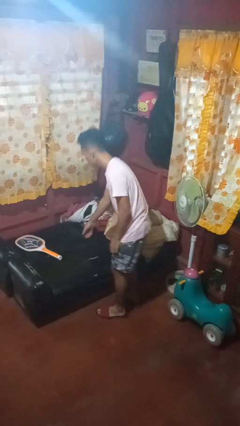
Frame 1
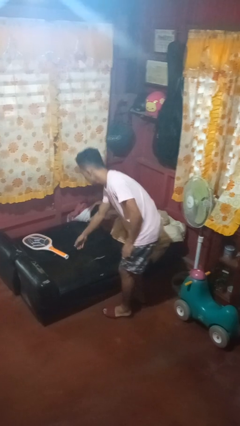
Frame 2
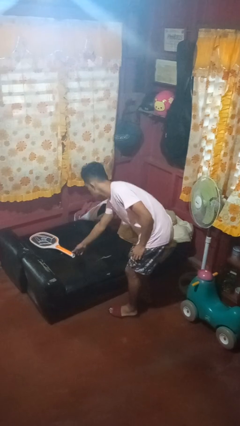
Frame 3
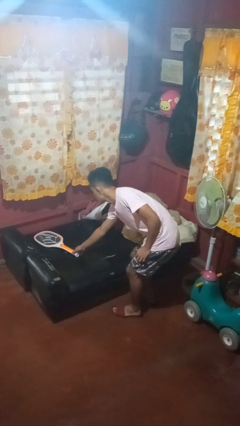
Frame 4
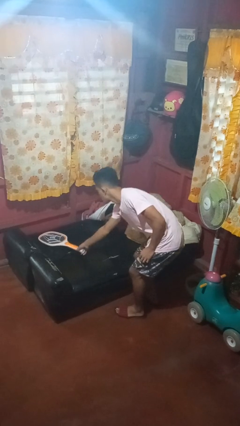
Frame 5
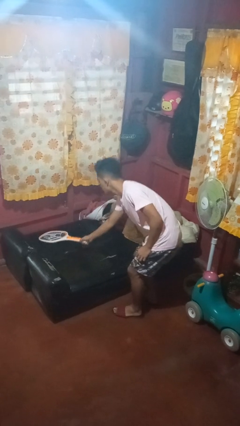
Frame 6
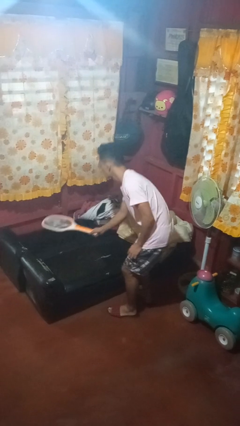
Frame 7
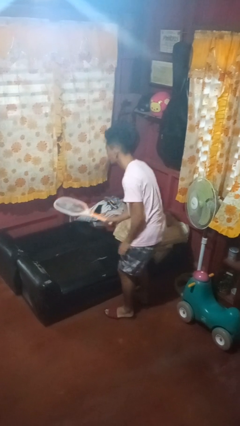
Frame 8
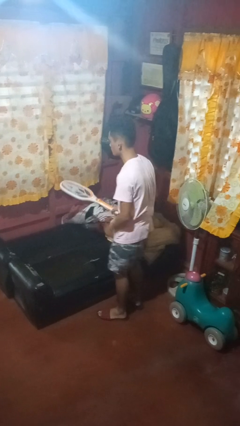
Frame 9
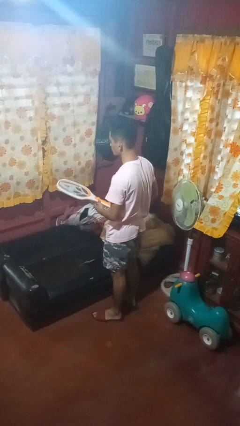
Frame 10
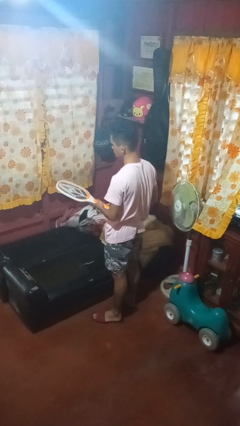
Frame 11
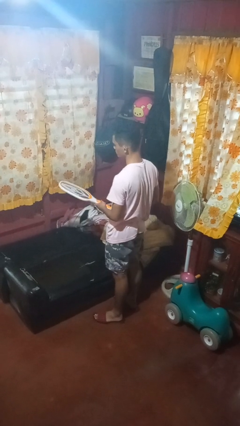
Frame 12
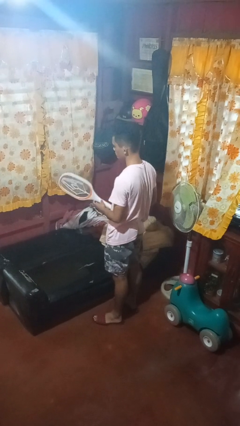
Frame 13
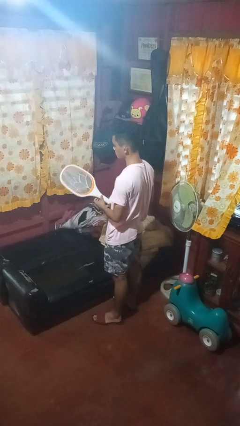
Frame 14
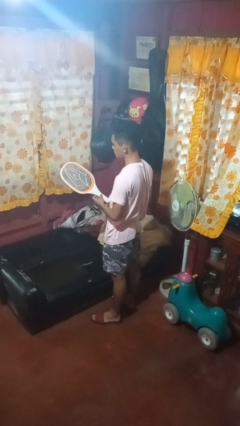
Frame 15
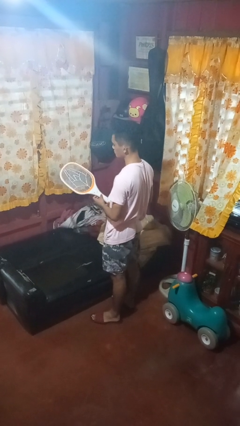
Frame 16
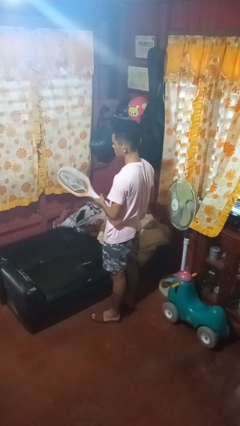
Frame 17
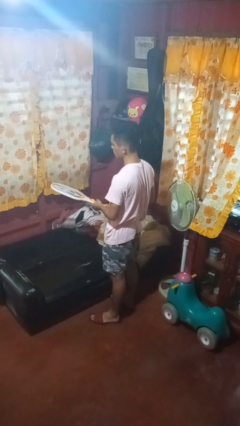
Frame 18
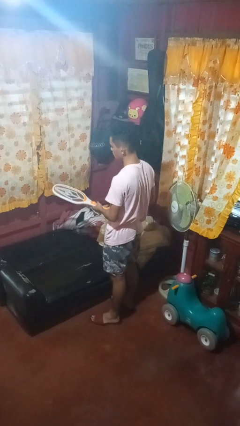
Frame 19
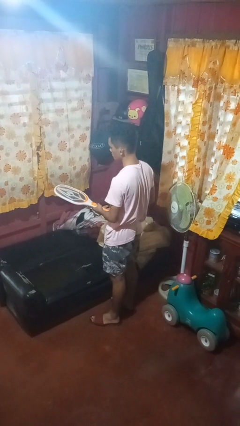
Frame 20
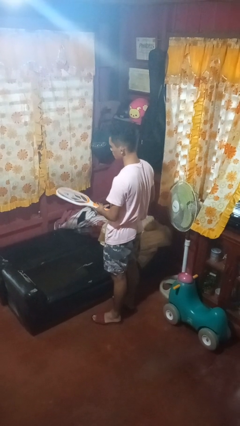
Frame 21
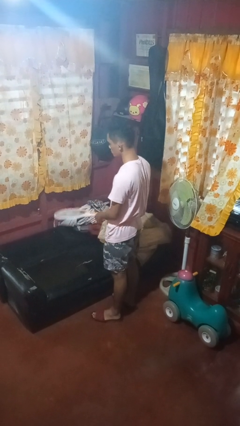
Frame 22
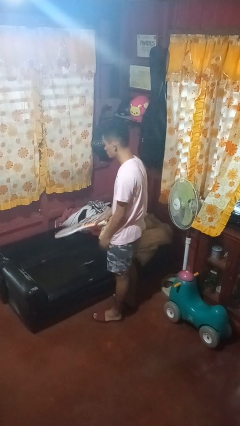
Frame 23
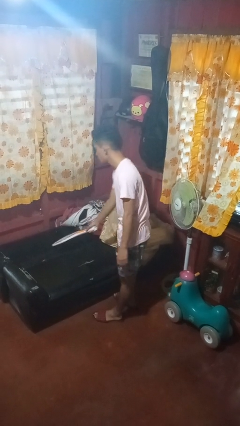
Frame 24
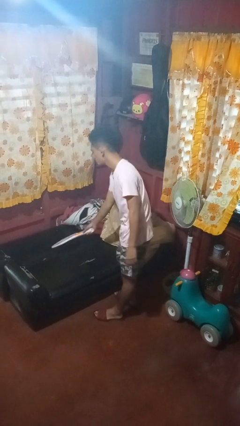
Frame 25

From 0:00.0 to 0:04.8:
person picks up object from couch

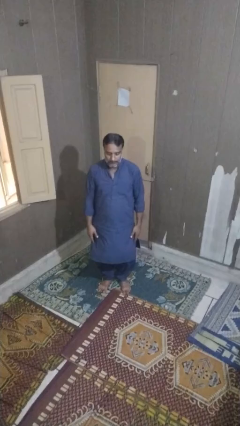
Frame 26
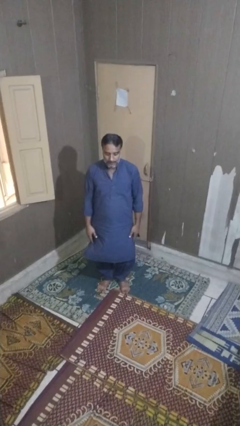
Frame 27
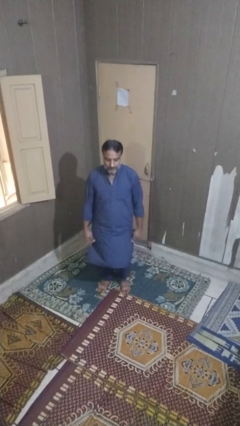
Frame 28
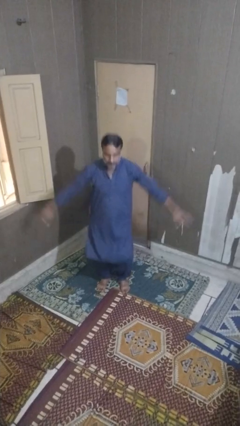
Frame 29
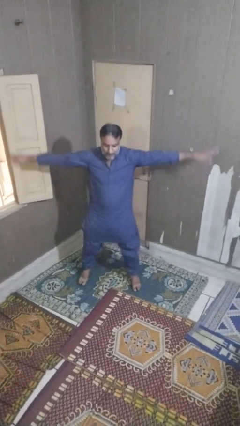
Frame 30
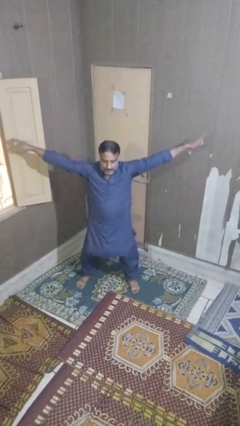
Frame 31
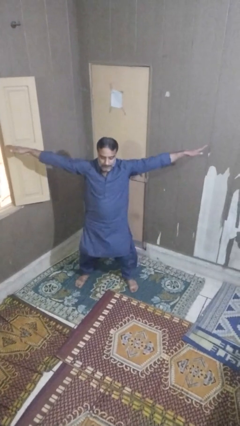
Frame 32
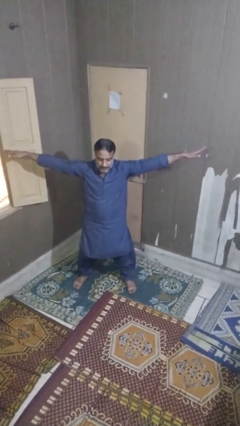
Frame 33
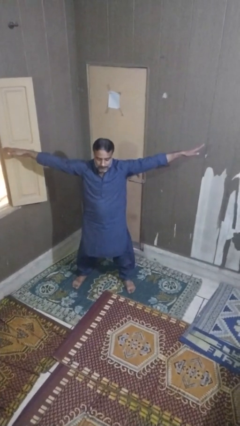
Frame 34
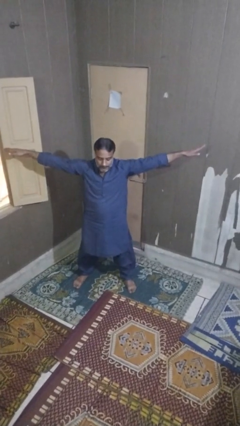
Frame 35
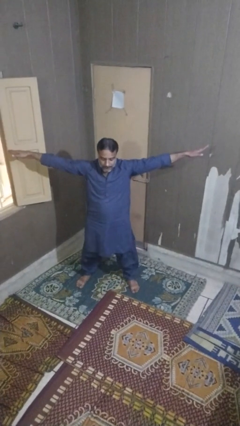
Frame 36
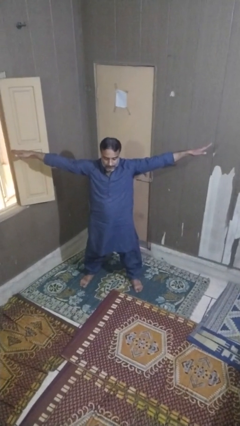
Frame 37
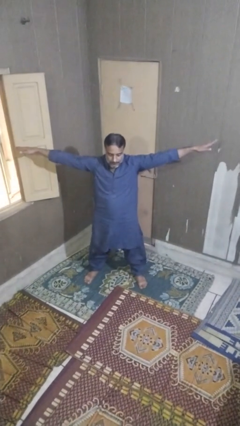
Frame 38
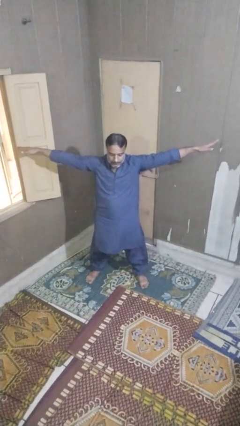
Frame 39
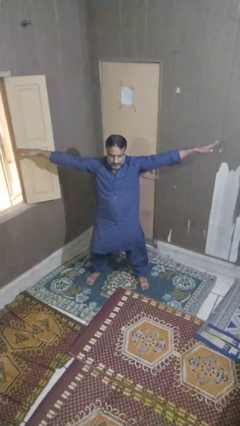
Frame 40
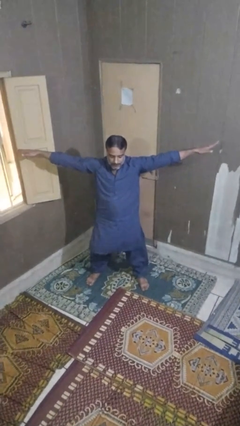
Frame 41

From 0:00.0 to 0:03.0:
person exercises with jumping jacks

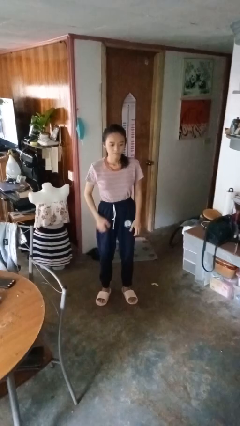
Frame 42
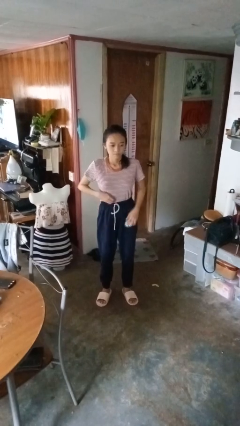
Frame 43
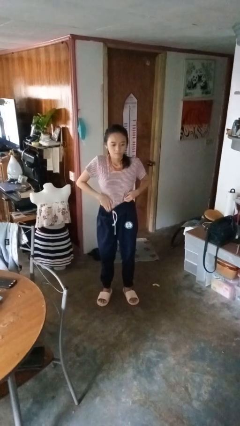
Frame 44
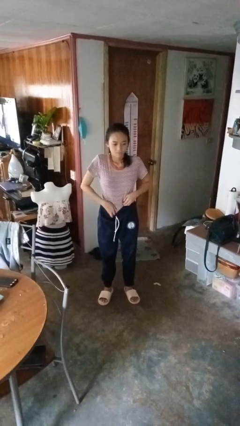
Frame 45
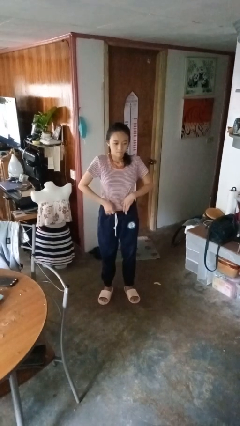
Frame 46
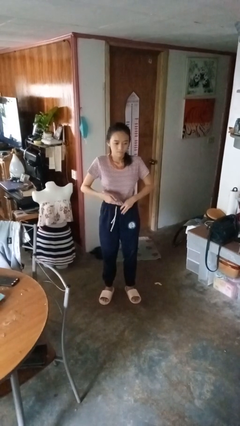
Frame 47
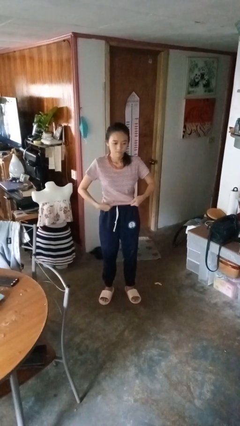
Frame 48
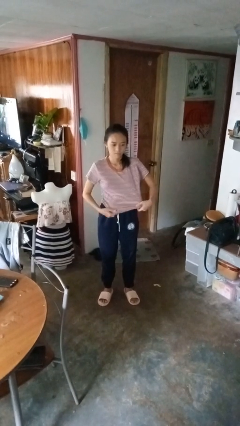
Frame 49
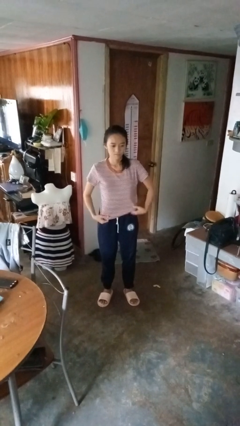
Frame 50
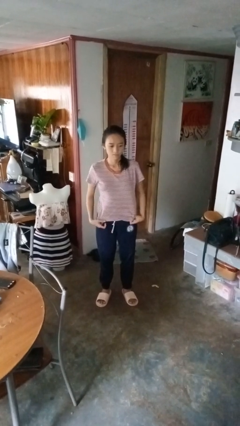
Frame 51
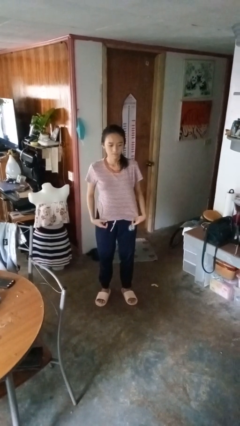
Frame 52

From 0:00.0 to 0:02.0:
person untucks shirt

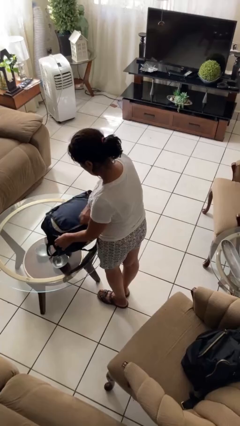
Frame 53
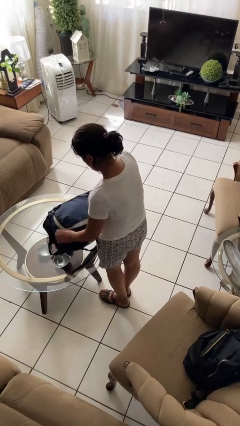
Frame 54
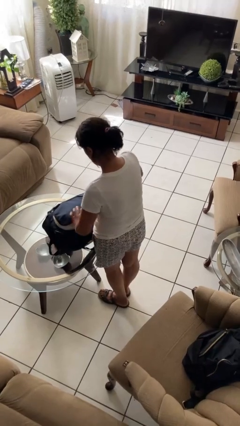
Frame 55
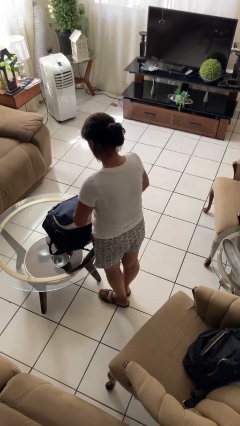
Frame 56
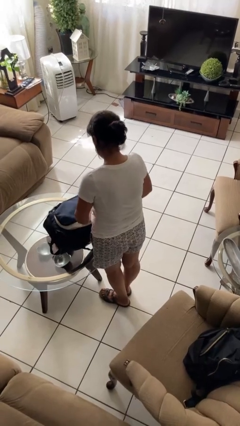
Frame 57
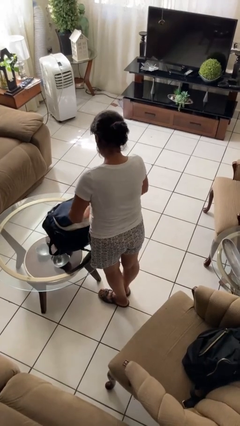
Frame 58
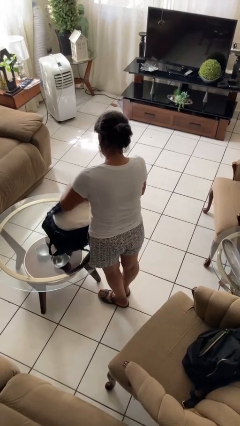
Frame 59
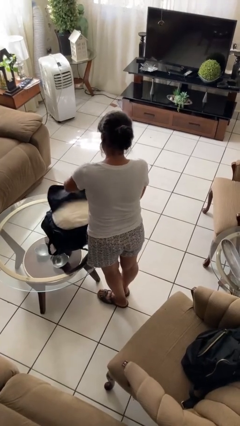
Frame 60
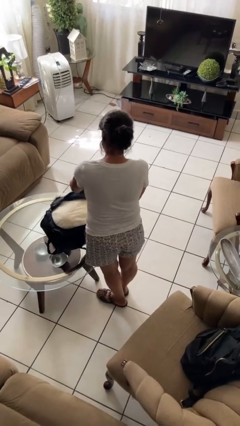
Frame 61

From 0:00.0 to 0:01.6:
person opens suitcase

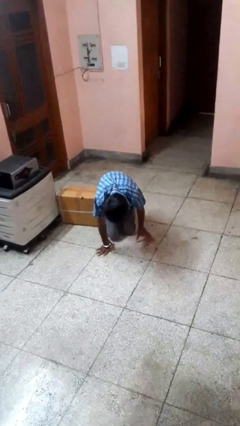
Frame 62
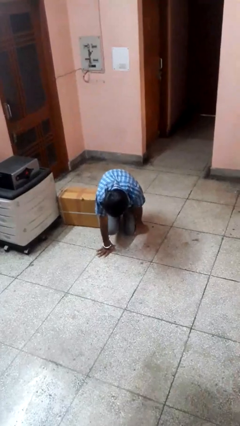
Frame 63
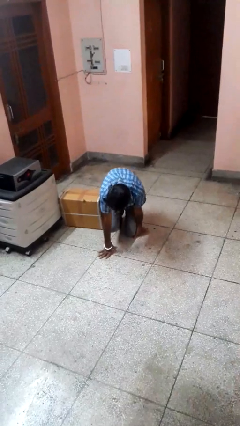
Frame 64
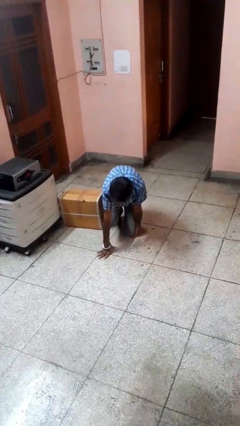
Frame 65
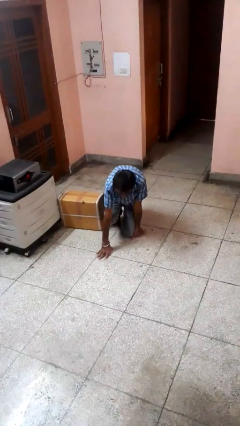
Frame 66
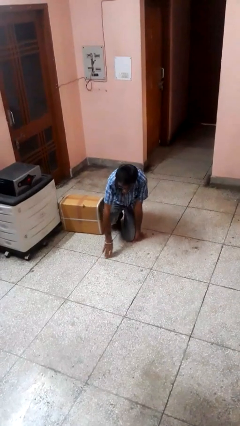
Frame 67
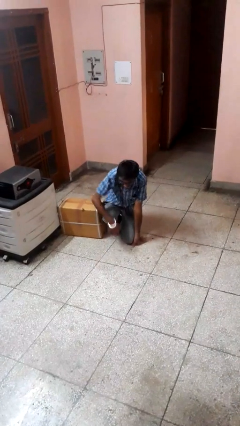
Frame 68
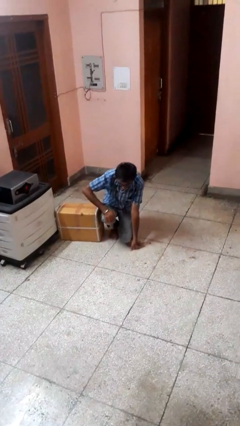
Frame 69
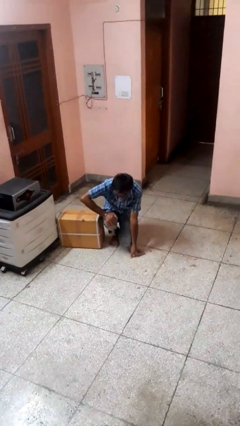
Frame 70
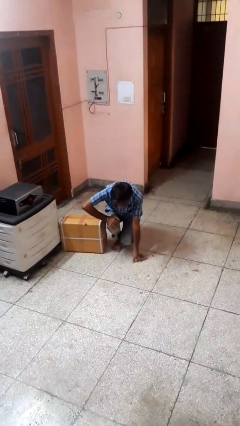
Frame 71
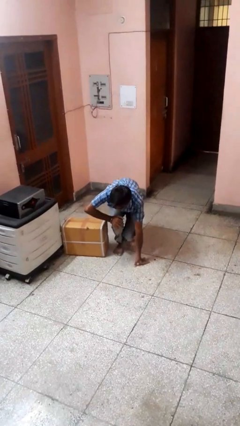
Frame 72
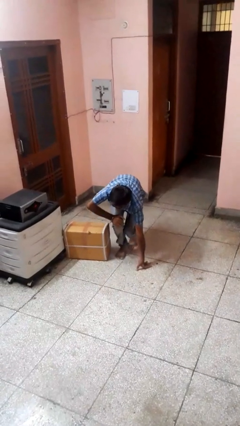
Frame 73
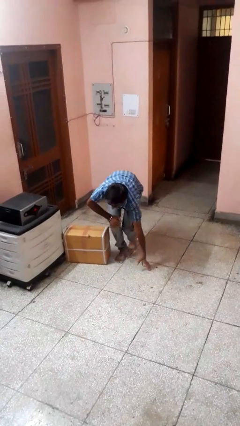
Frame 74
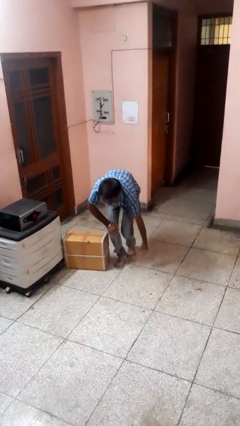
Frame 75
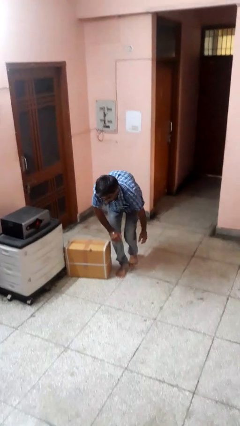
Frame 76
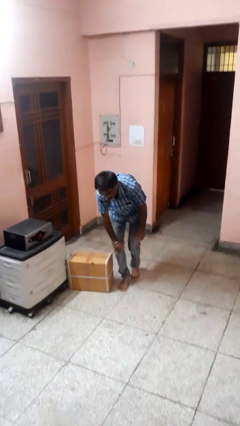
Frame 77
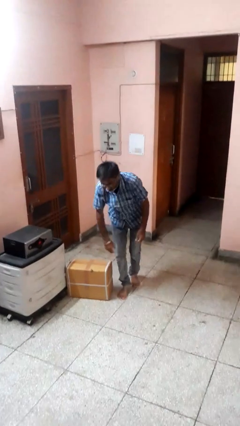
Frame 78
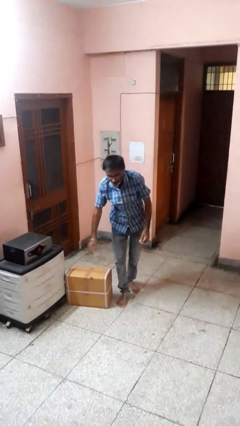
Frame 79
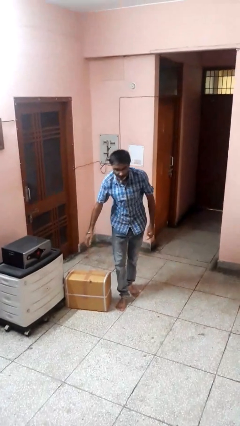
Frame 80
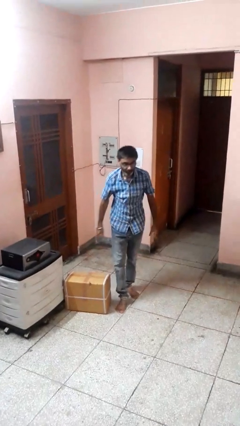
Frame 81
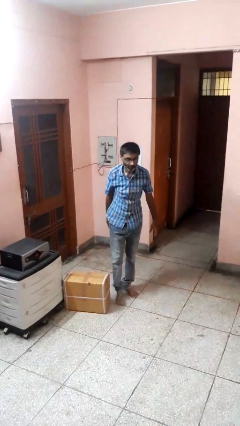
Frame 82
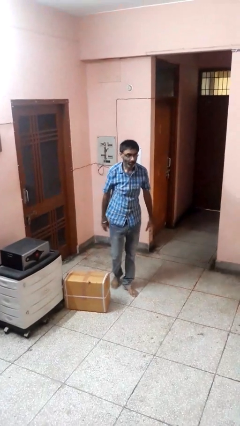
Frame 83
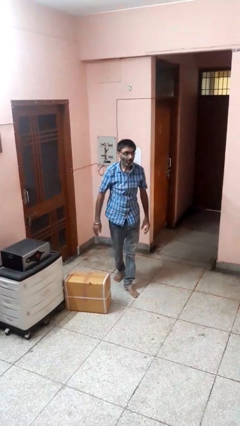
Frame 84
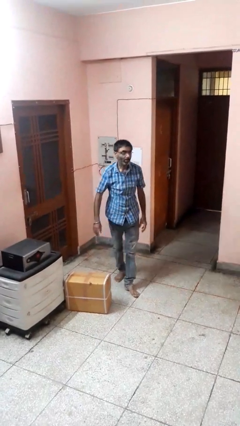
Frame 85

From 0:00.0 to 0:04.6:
person stands up from floor

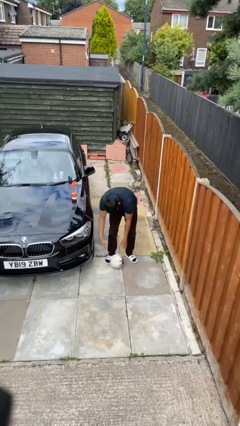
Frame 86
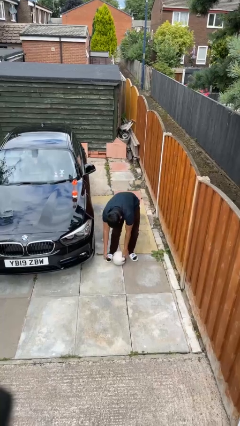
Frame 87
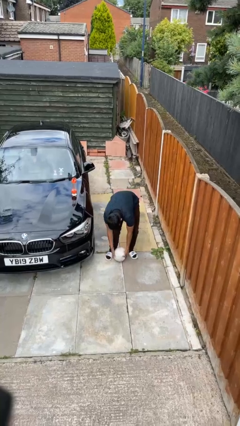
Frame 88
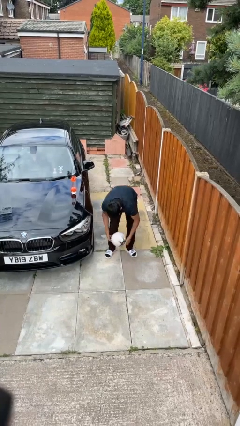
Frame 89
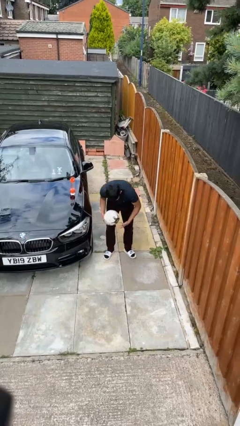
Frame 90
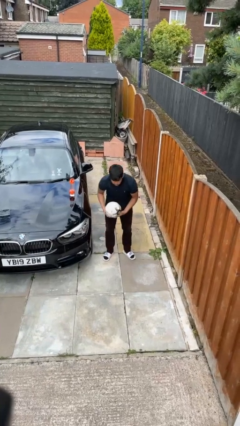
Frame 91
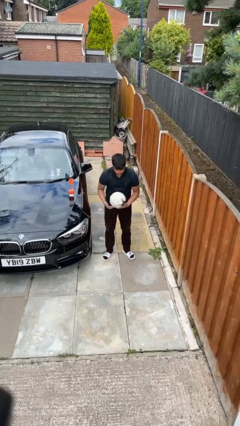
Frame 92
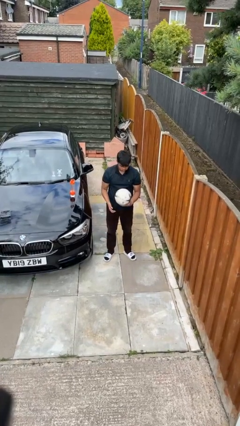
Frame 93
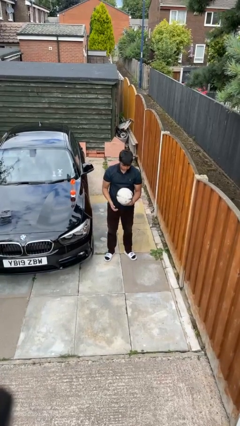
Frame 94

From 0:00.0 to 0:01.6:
person picks up object from floor
